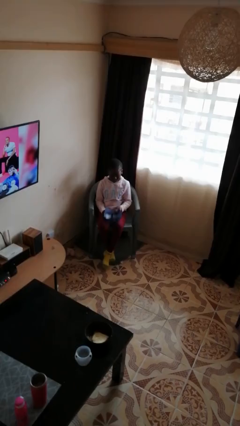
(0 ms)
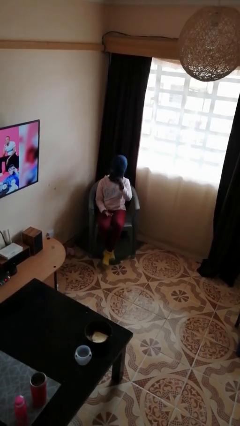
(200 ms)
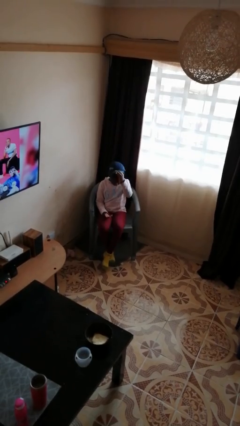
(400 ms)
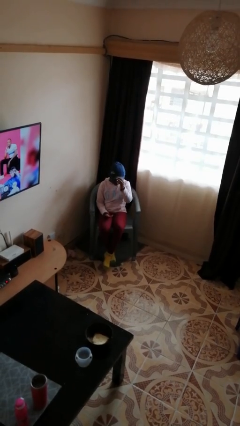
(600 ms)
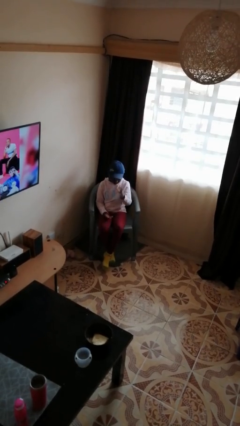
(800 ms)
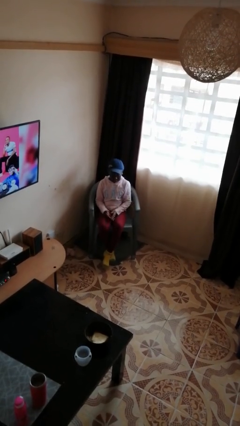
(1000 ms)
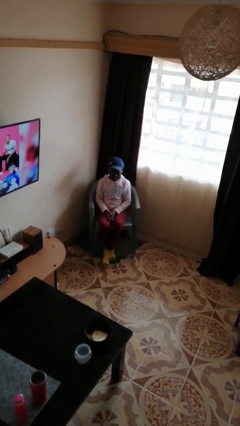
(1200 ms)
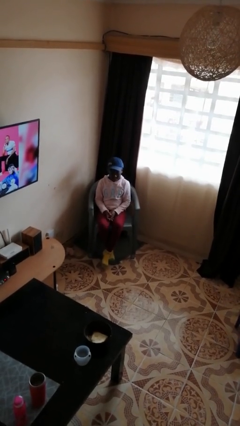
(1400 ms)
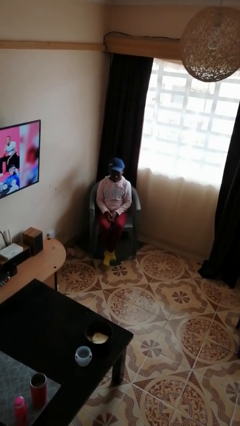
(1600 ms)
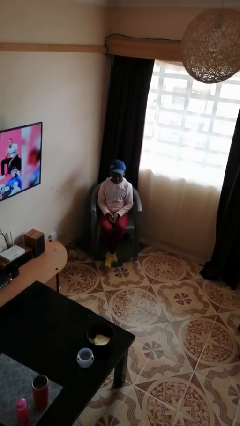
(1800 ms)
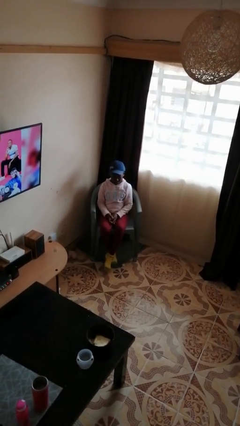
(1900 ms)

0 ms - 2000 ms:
person puts on hat

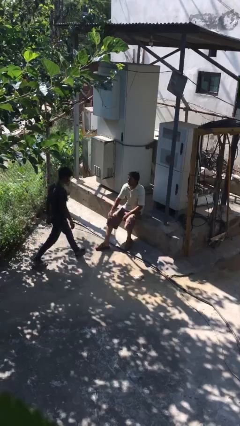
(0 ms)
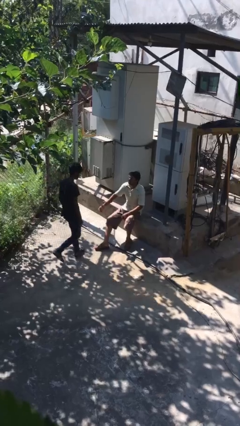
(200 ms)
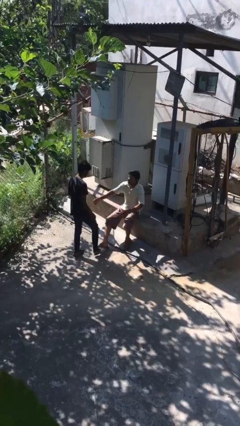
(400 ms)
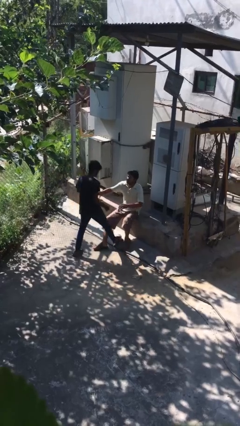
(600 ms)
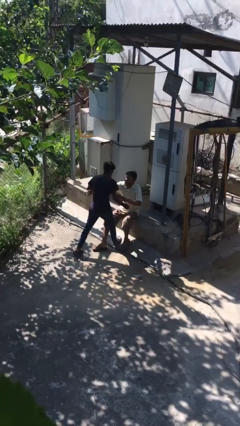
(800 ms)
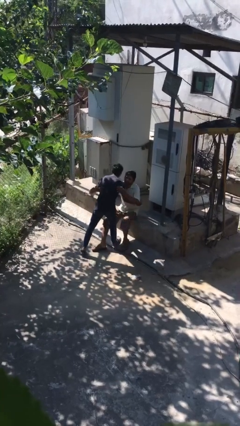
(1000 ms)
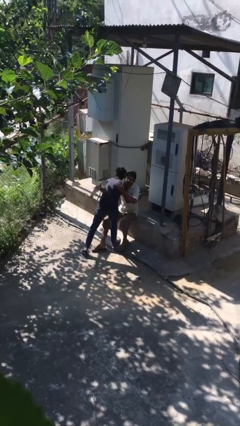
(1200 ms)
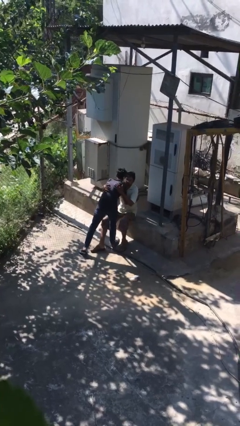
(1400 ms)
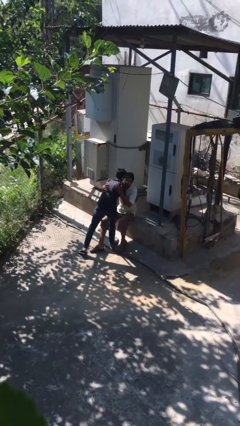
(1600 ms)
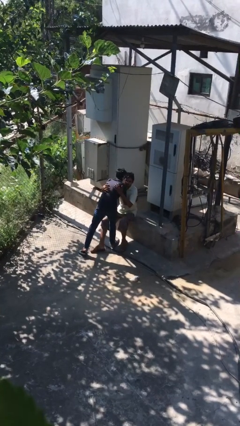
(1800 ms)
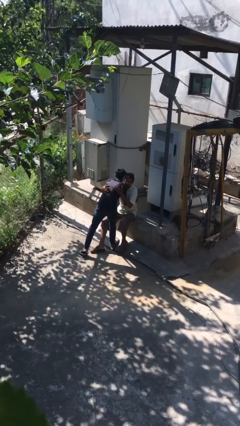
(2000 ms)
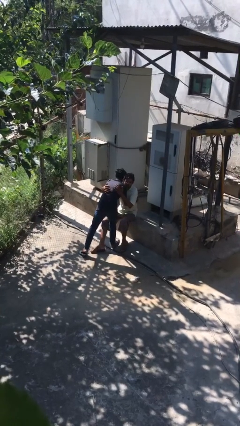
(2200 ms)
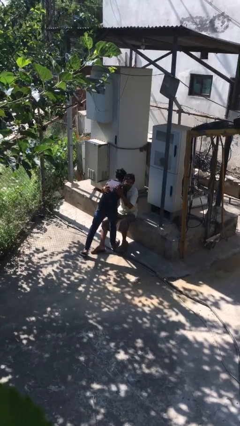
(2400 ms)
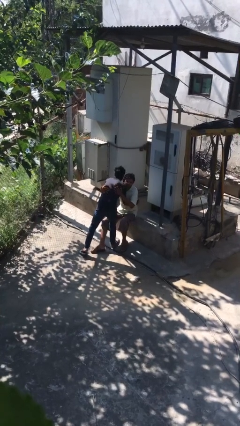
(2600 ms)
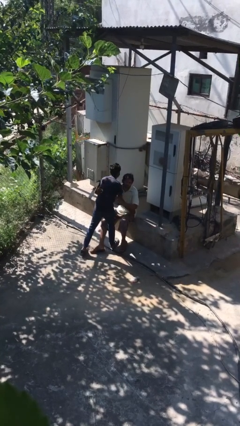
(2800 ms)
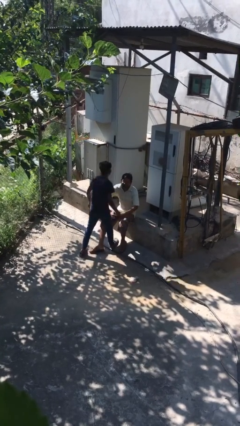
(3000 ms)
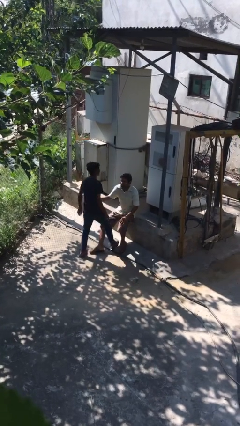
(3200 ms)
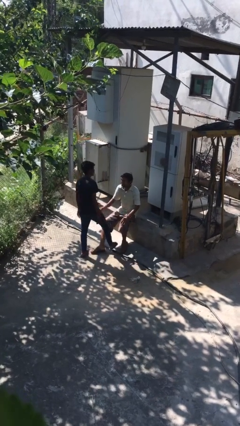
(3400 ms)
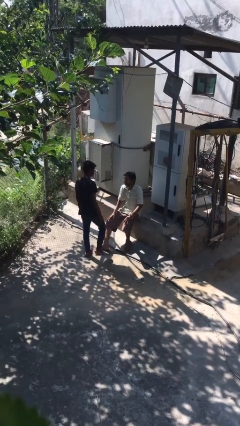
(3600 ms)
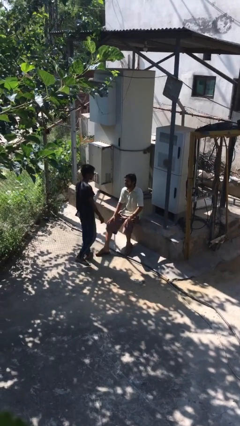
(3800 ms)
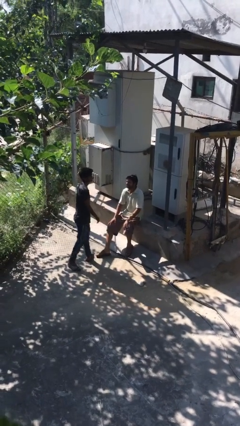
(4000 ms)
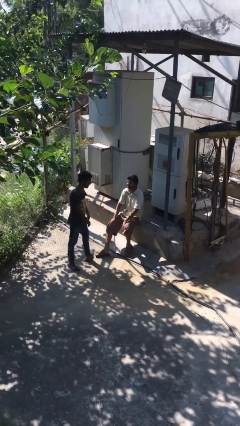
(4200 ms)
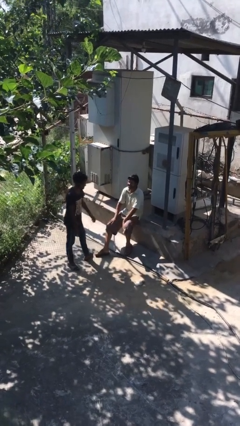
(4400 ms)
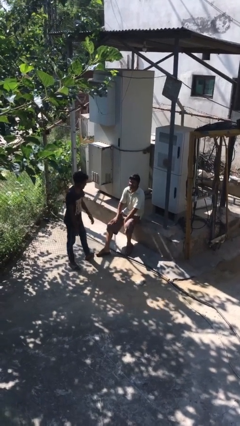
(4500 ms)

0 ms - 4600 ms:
person embraces person

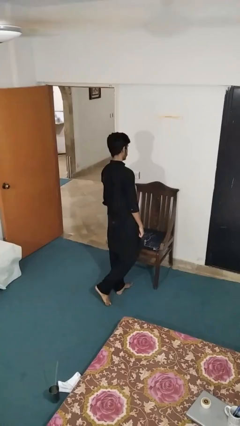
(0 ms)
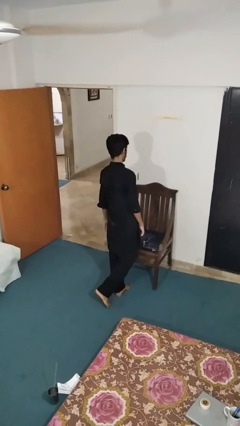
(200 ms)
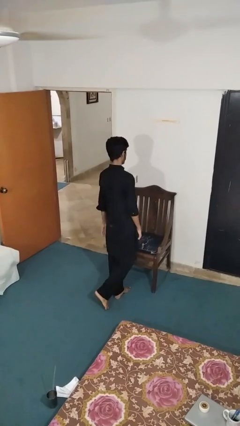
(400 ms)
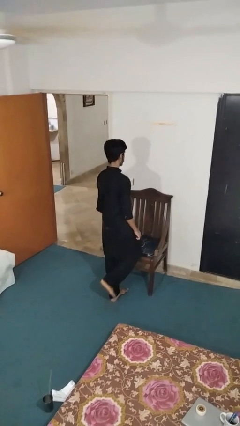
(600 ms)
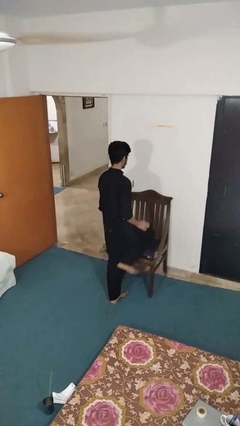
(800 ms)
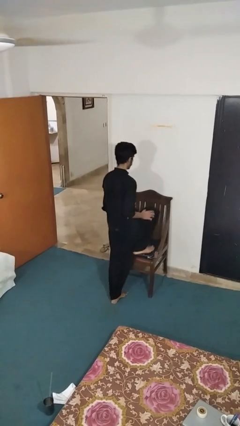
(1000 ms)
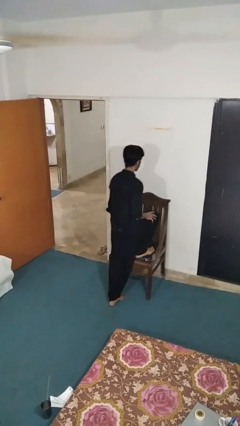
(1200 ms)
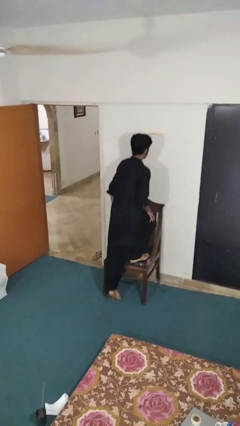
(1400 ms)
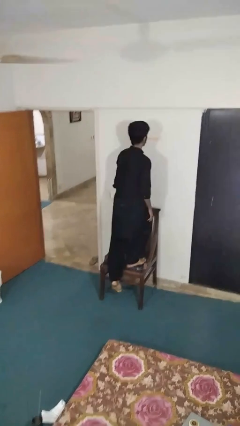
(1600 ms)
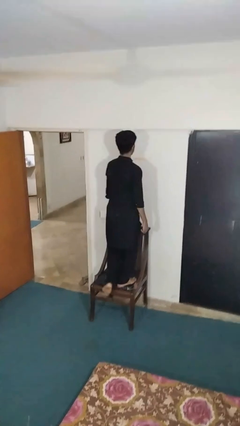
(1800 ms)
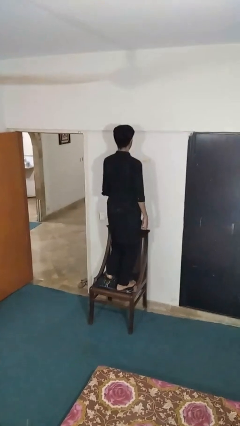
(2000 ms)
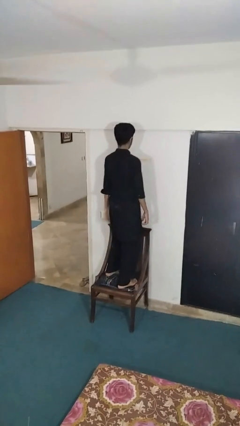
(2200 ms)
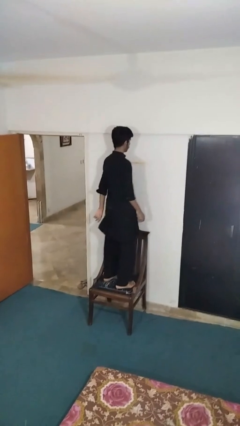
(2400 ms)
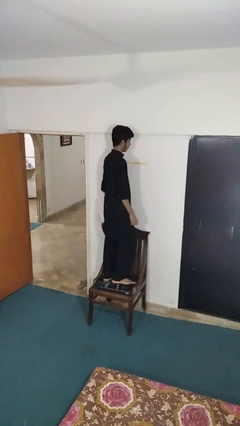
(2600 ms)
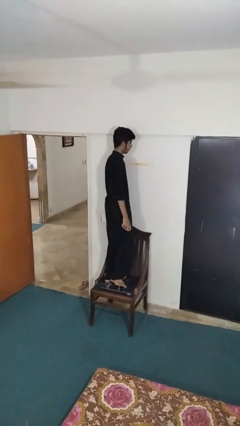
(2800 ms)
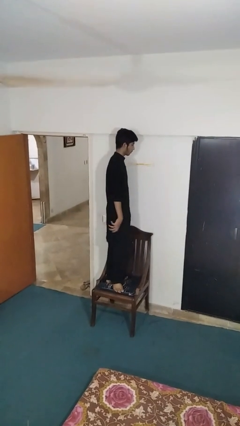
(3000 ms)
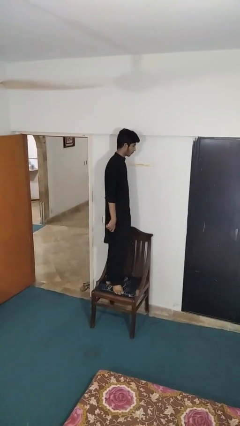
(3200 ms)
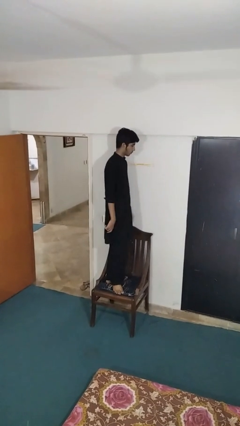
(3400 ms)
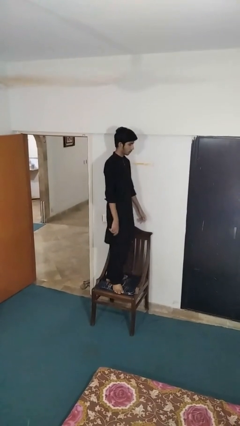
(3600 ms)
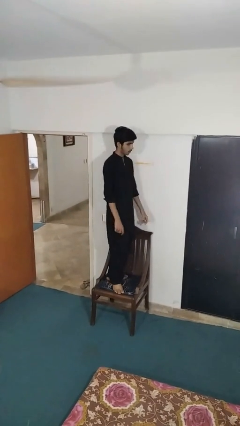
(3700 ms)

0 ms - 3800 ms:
person climbs on chair

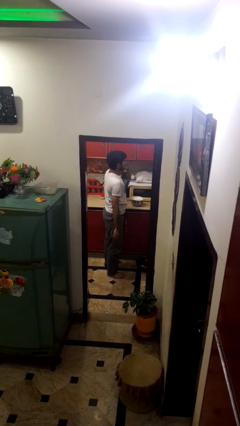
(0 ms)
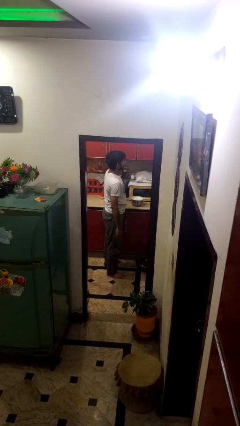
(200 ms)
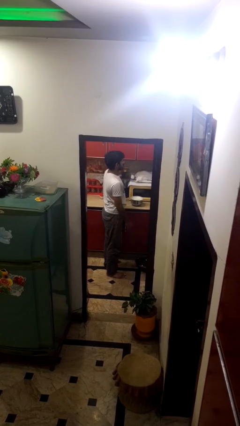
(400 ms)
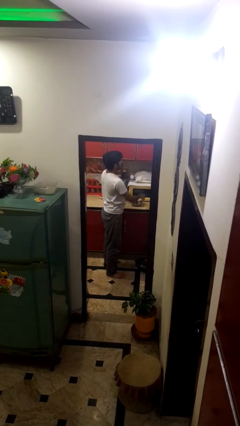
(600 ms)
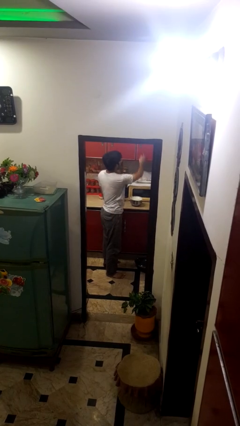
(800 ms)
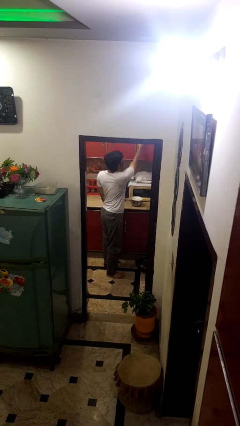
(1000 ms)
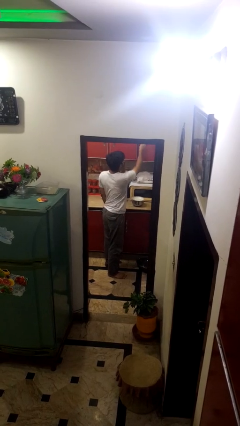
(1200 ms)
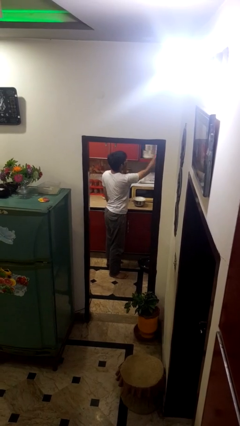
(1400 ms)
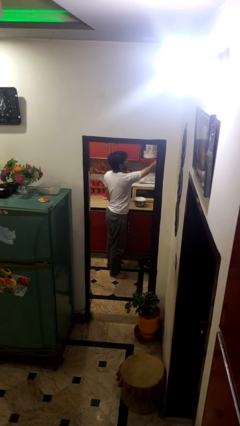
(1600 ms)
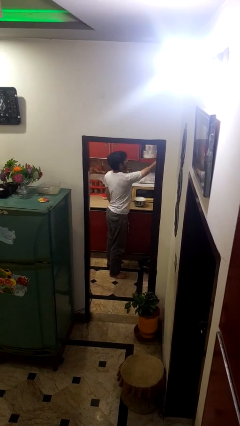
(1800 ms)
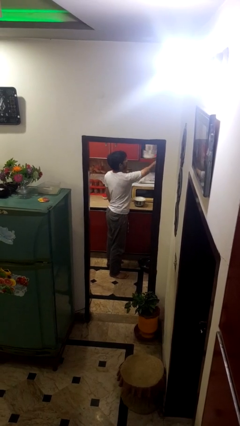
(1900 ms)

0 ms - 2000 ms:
person opens cabinet

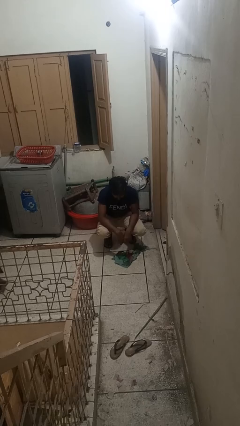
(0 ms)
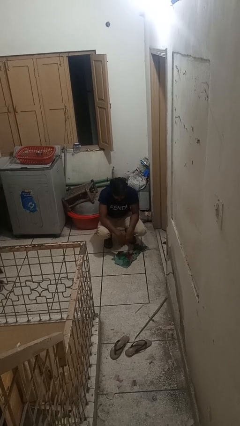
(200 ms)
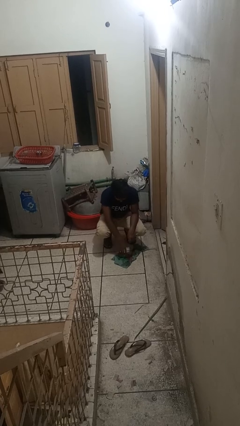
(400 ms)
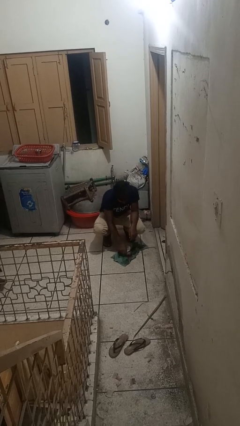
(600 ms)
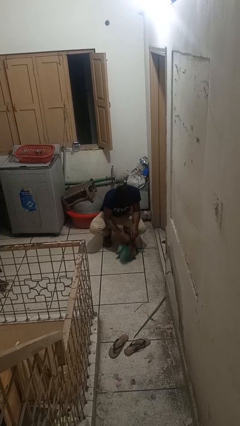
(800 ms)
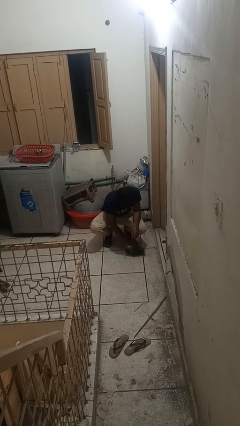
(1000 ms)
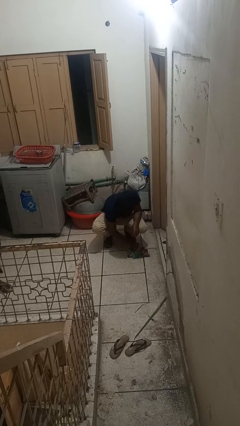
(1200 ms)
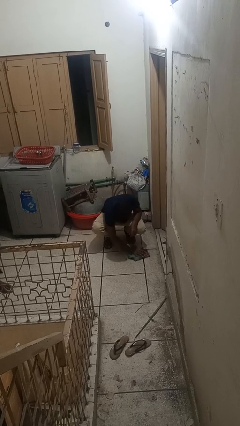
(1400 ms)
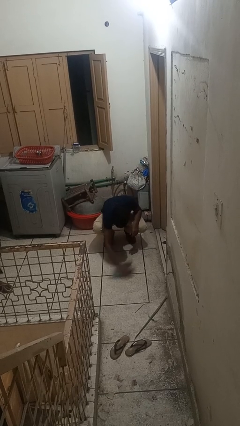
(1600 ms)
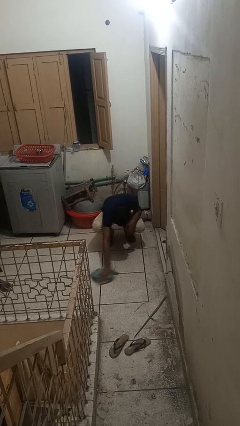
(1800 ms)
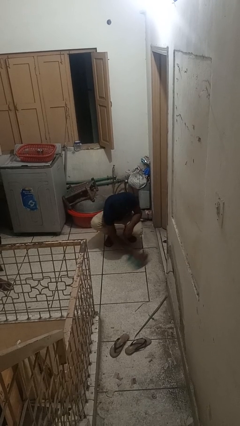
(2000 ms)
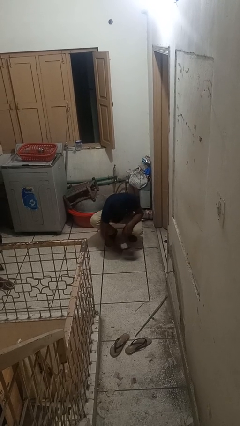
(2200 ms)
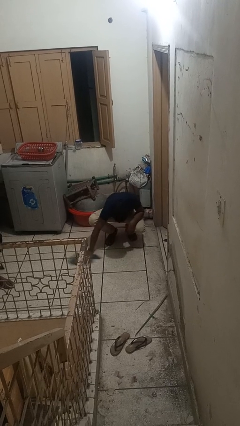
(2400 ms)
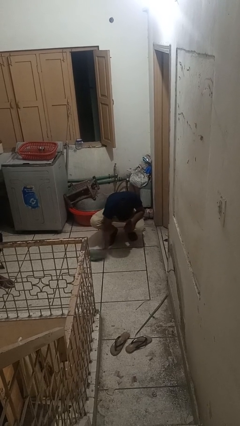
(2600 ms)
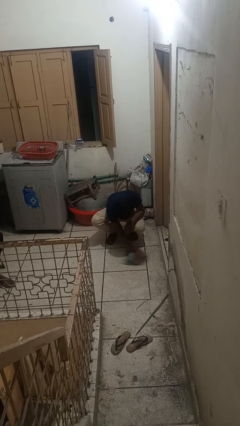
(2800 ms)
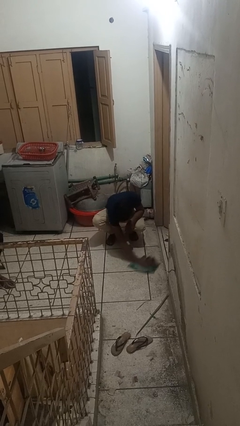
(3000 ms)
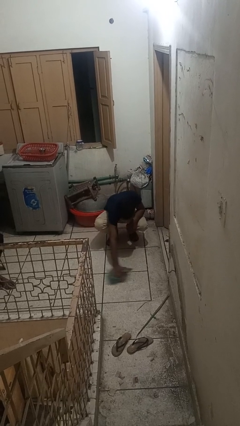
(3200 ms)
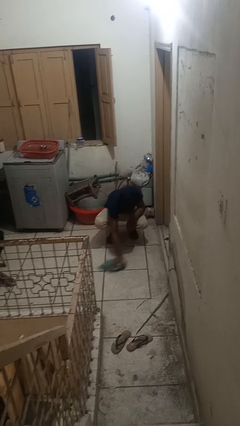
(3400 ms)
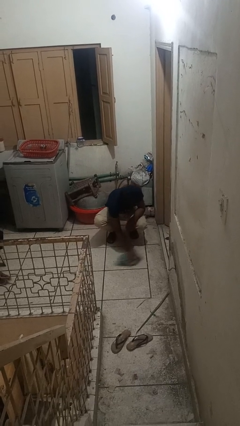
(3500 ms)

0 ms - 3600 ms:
person mops

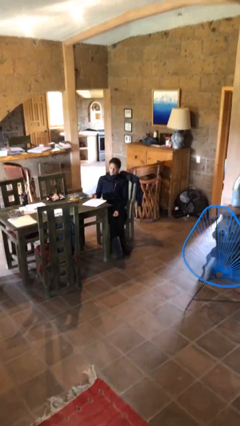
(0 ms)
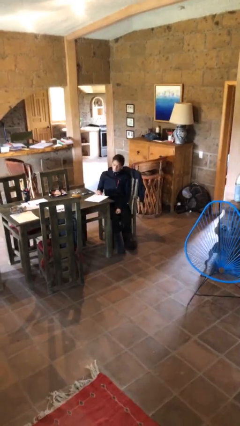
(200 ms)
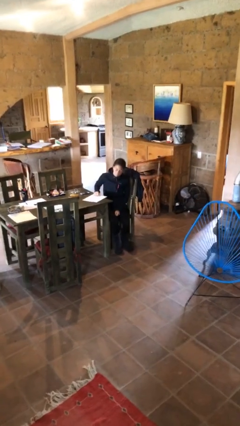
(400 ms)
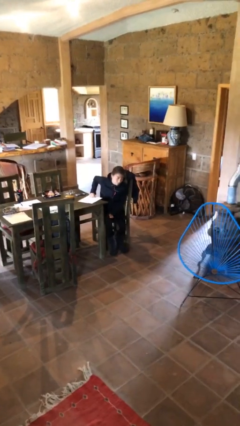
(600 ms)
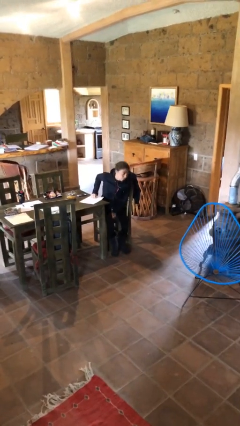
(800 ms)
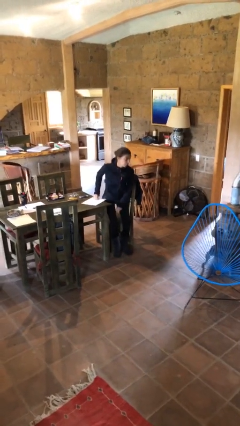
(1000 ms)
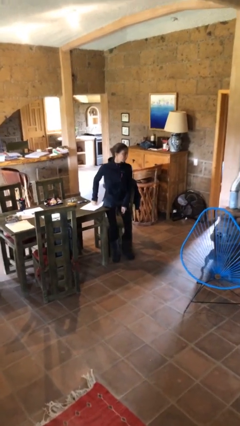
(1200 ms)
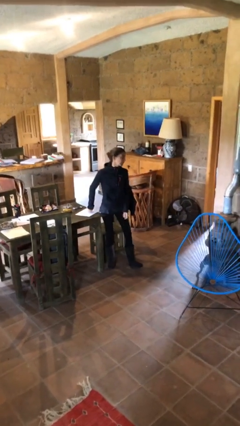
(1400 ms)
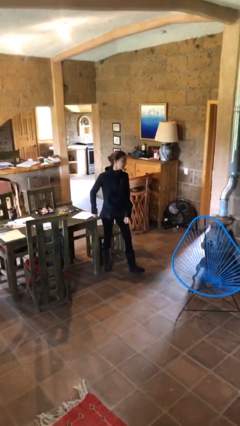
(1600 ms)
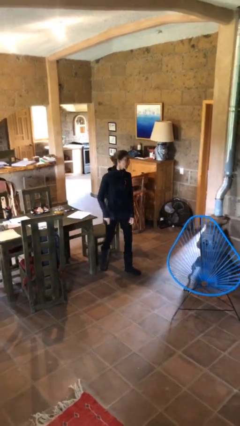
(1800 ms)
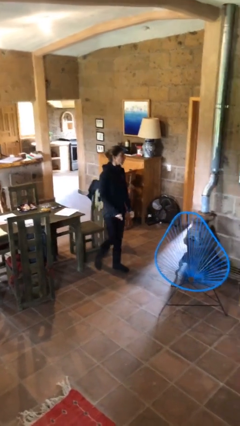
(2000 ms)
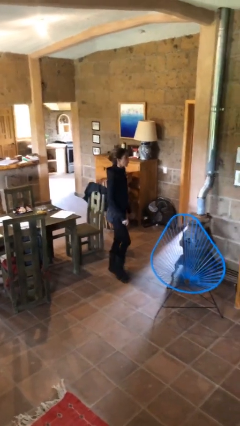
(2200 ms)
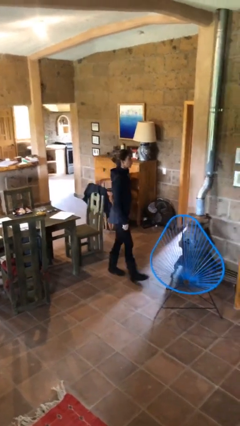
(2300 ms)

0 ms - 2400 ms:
person stands up
